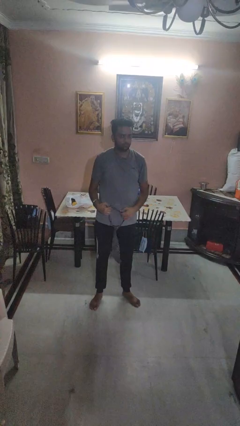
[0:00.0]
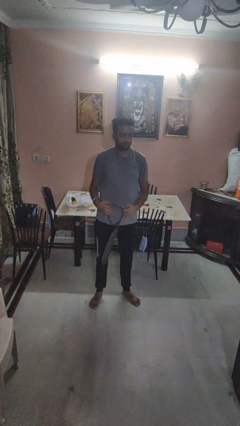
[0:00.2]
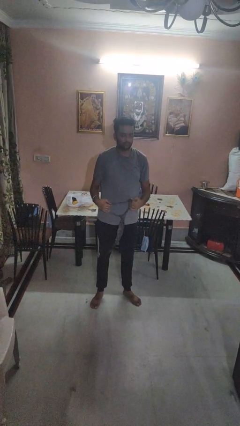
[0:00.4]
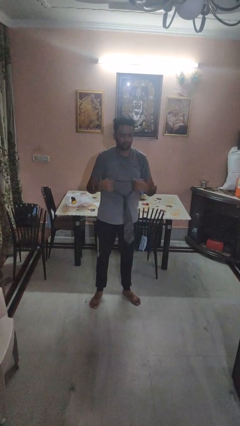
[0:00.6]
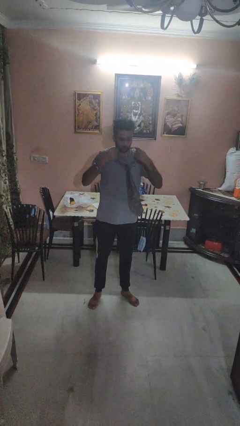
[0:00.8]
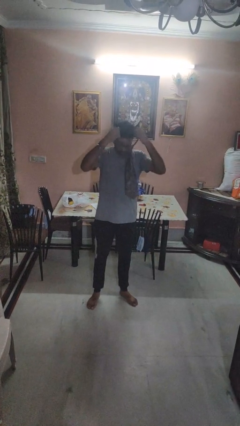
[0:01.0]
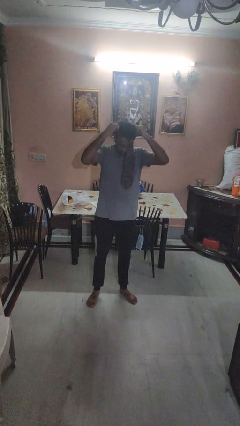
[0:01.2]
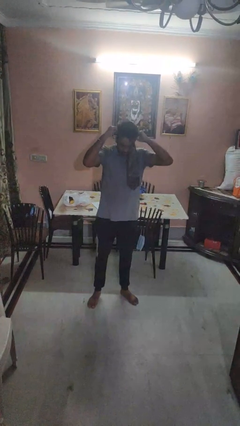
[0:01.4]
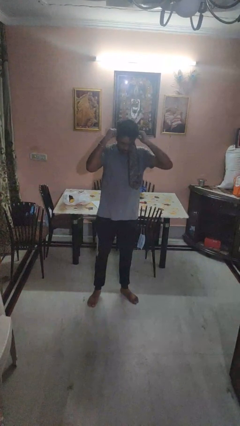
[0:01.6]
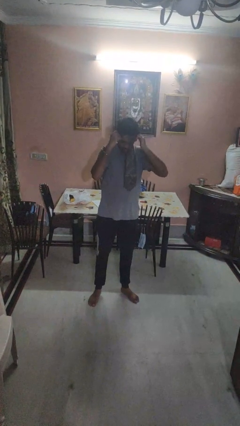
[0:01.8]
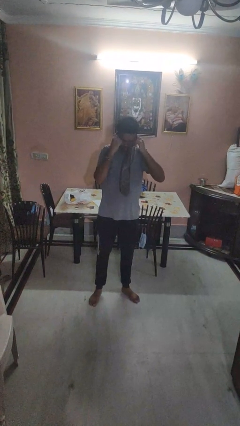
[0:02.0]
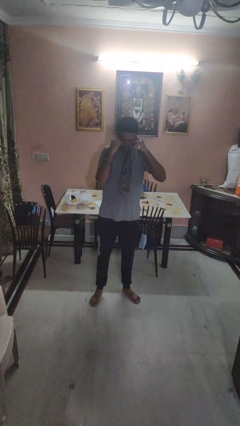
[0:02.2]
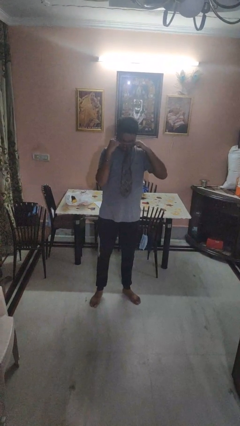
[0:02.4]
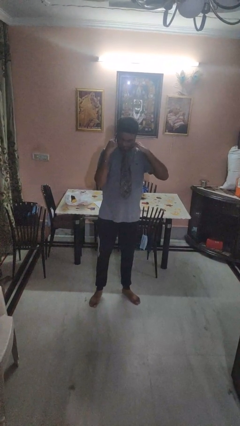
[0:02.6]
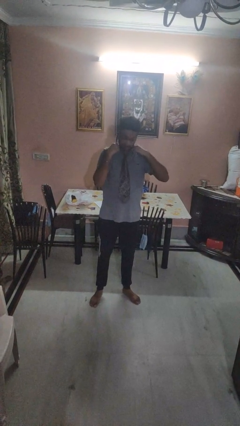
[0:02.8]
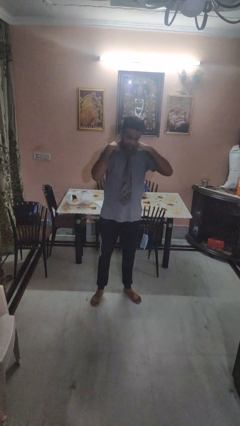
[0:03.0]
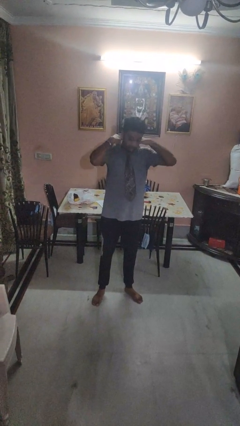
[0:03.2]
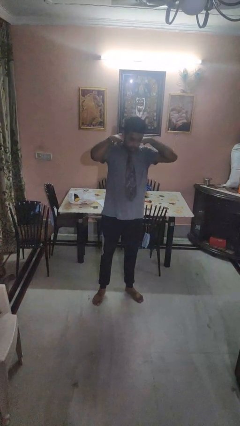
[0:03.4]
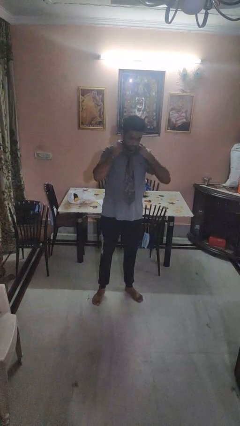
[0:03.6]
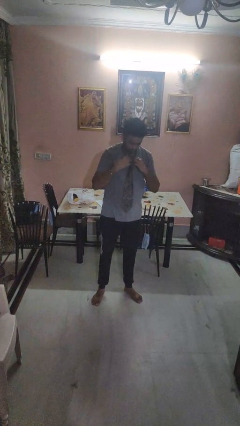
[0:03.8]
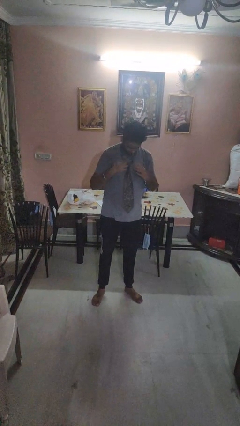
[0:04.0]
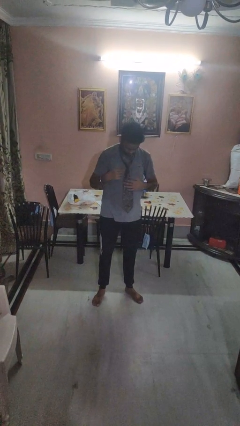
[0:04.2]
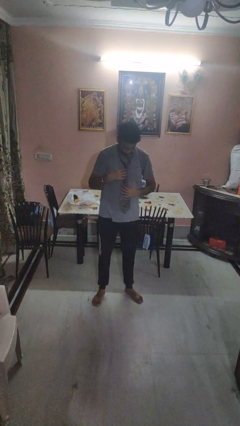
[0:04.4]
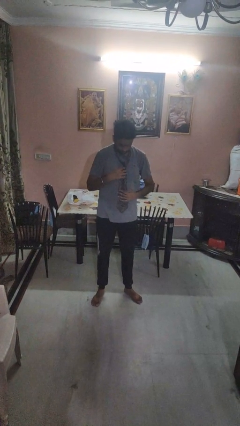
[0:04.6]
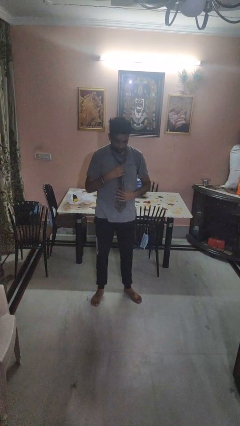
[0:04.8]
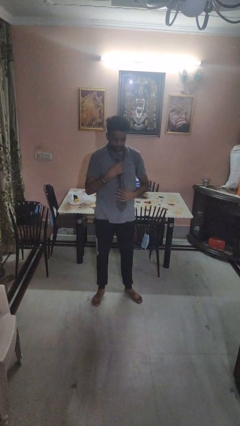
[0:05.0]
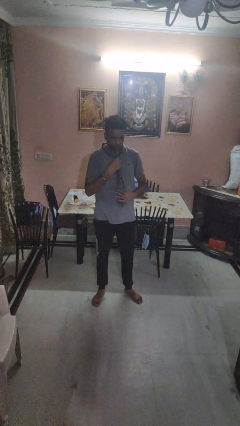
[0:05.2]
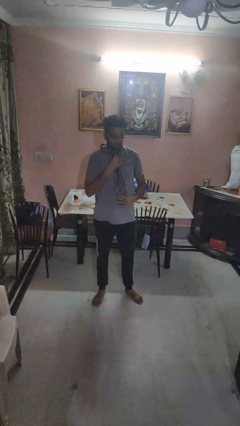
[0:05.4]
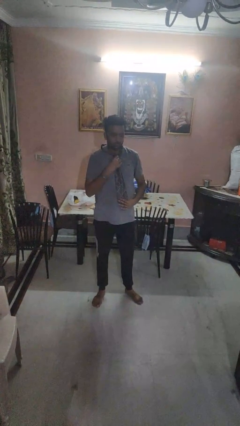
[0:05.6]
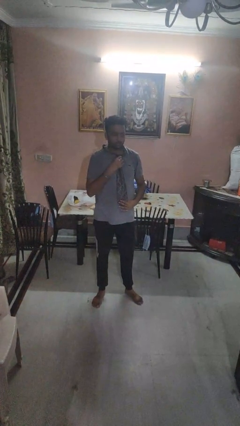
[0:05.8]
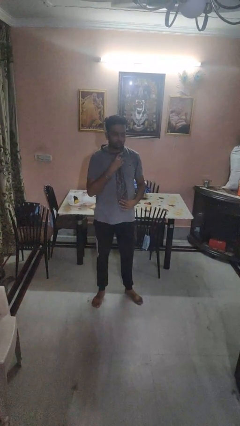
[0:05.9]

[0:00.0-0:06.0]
person puts on necktie

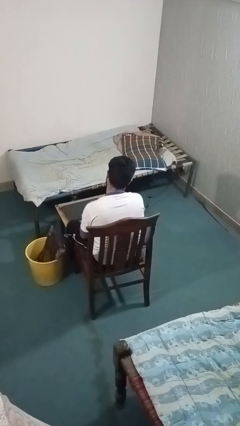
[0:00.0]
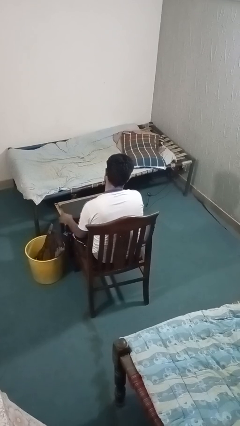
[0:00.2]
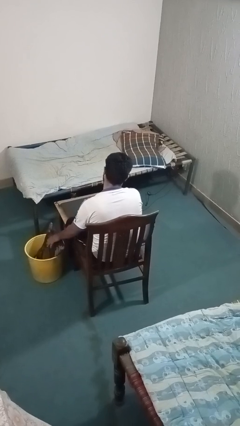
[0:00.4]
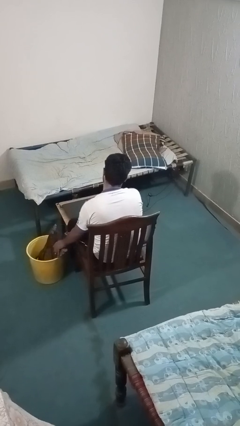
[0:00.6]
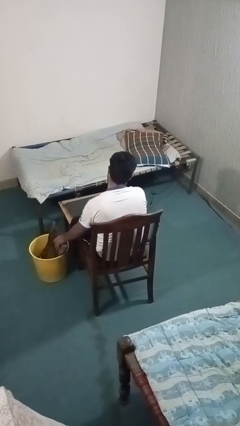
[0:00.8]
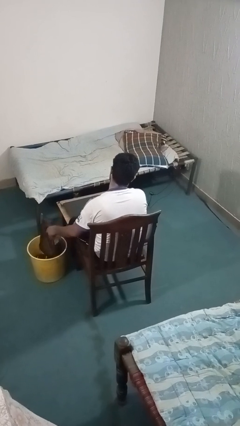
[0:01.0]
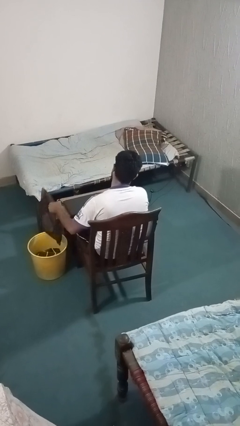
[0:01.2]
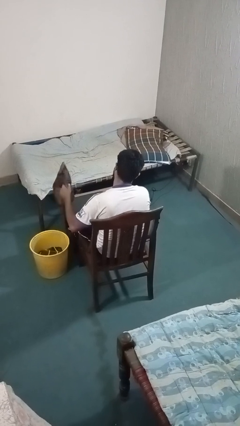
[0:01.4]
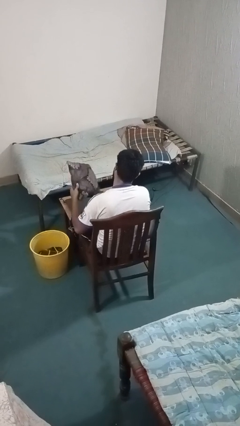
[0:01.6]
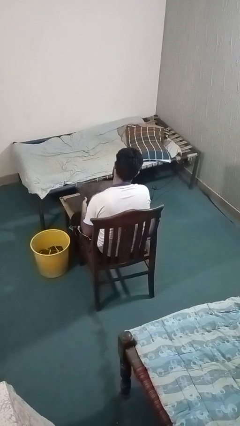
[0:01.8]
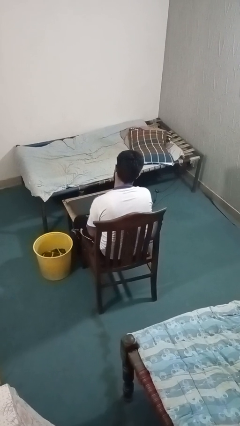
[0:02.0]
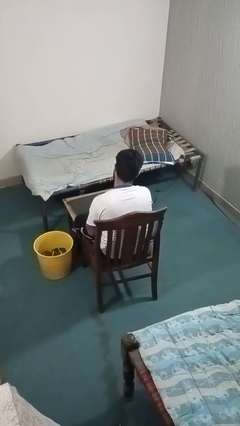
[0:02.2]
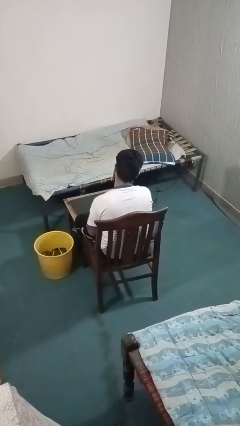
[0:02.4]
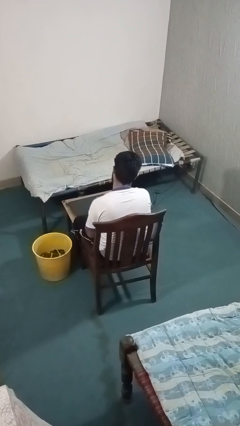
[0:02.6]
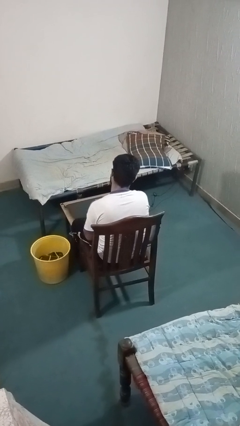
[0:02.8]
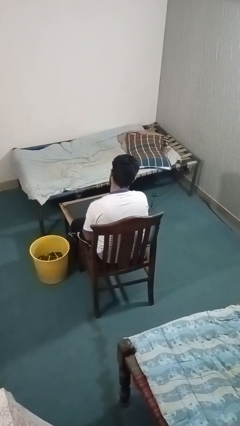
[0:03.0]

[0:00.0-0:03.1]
person takes object from basket

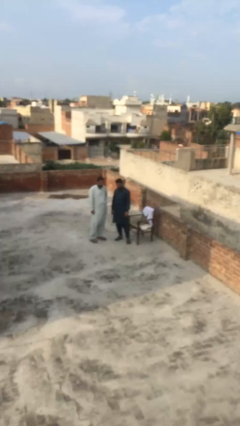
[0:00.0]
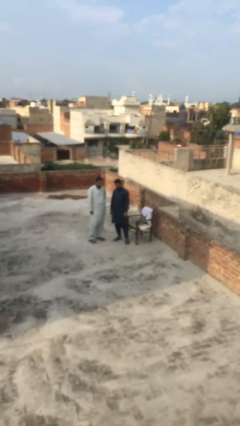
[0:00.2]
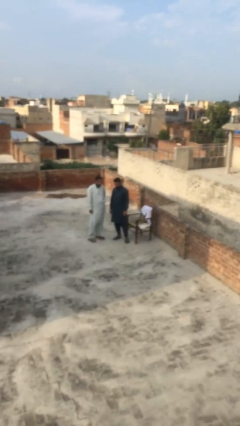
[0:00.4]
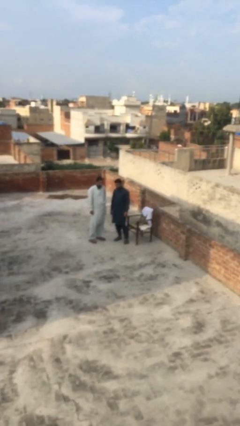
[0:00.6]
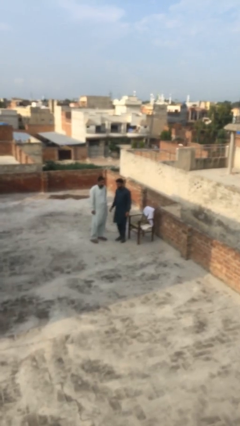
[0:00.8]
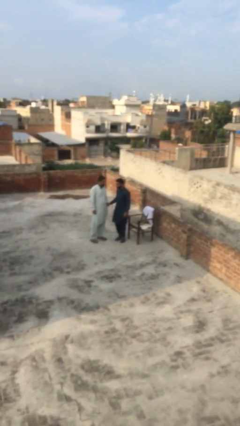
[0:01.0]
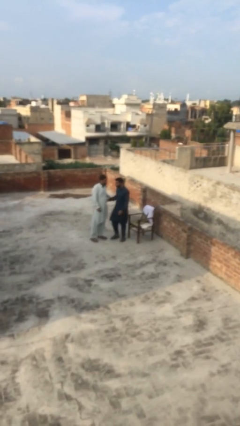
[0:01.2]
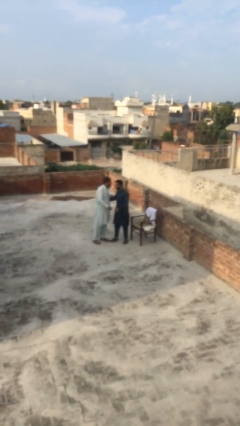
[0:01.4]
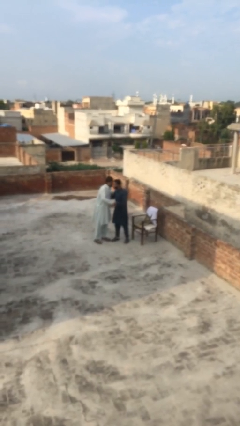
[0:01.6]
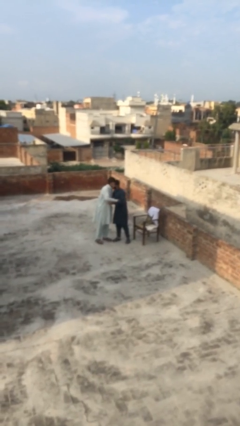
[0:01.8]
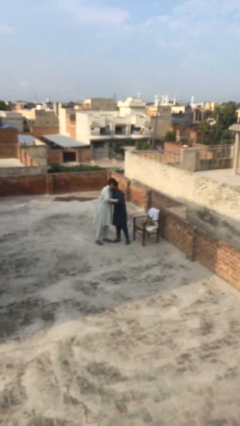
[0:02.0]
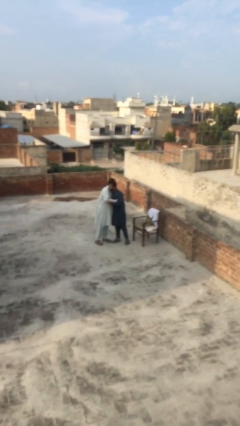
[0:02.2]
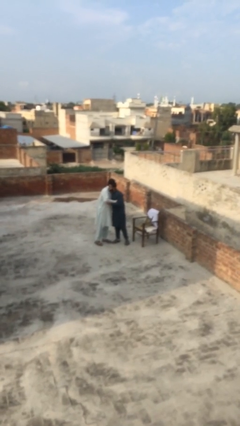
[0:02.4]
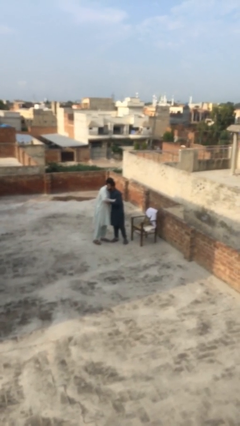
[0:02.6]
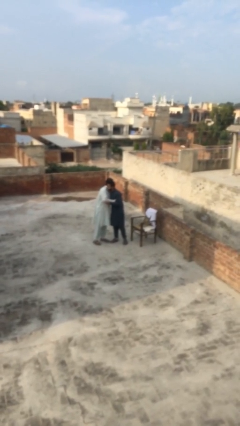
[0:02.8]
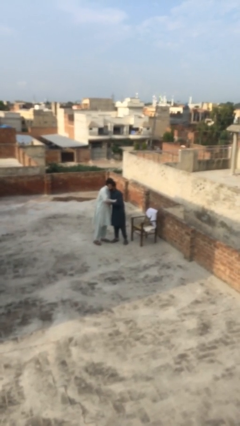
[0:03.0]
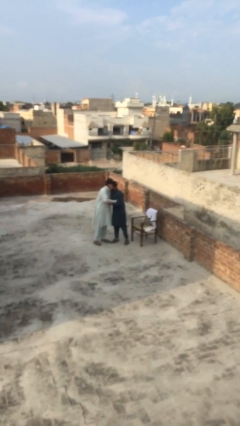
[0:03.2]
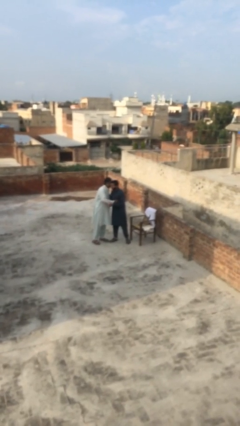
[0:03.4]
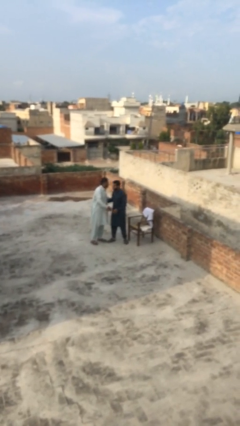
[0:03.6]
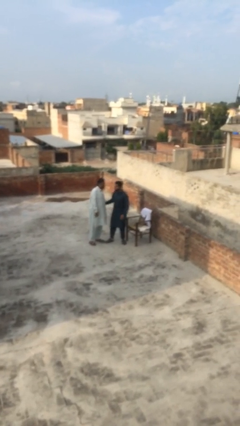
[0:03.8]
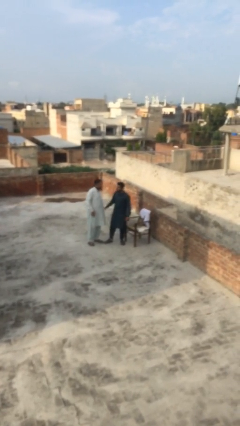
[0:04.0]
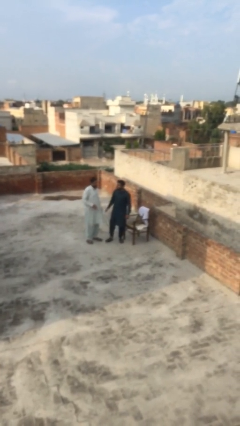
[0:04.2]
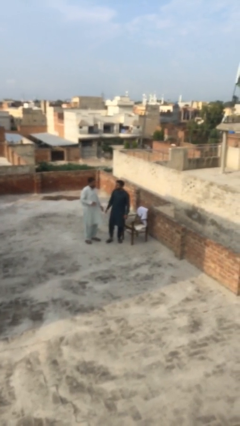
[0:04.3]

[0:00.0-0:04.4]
person embraces person

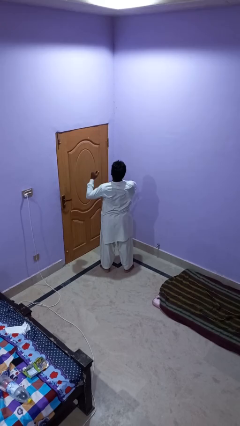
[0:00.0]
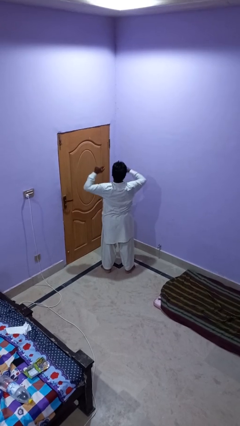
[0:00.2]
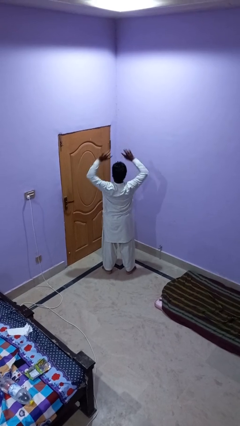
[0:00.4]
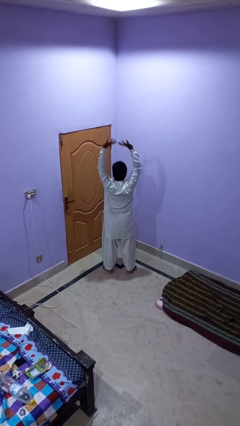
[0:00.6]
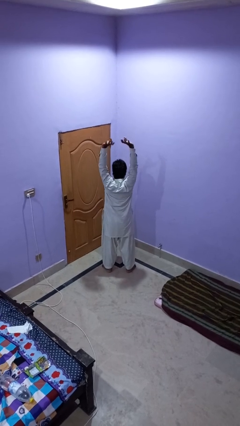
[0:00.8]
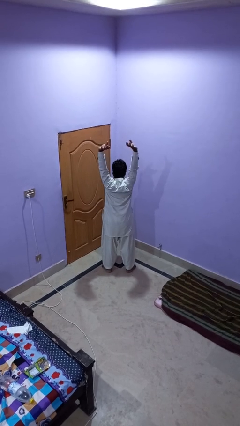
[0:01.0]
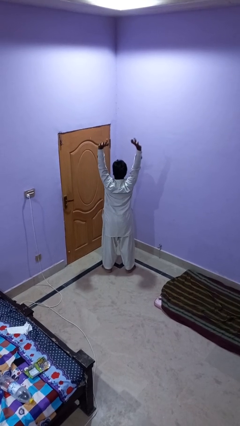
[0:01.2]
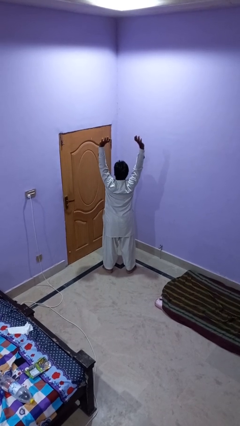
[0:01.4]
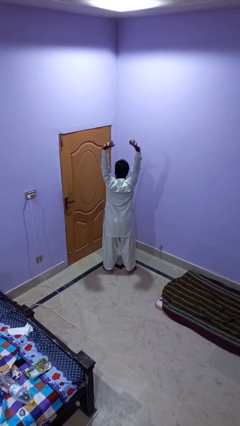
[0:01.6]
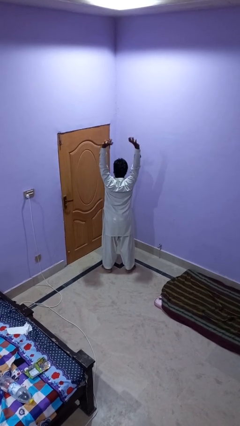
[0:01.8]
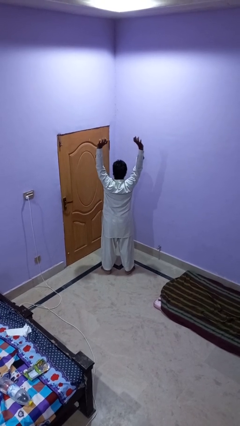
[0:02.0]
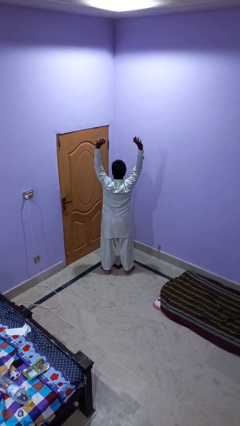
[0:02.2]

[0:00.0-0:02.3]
person stretches arms over head

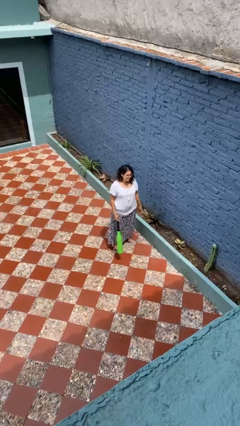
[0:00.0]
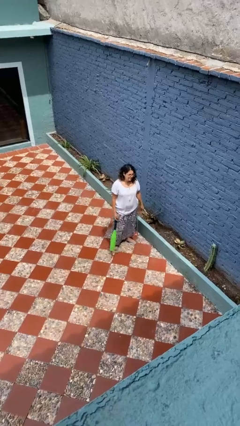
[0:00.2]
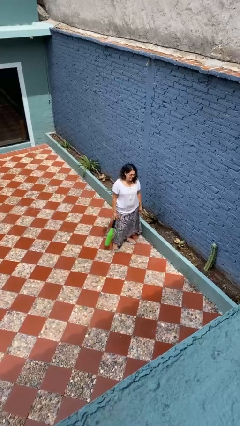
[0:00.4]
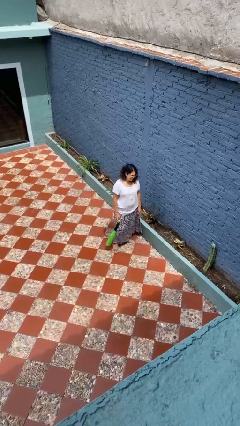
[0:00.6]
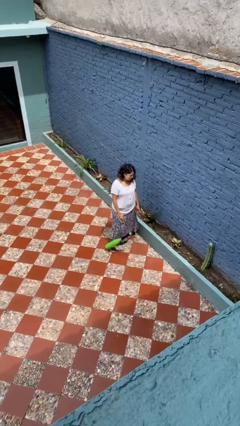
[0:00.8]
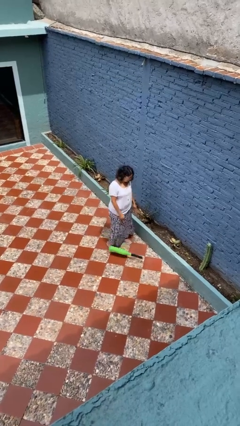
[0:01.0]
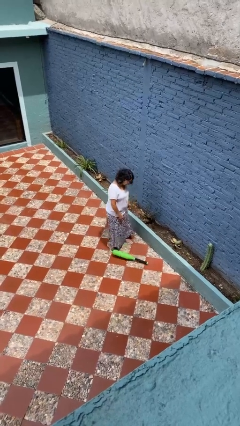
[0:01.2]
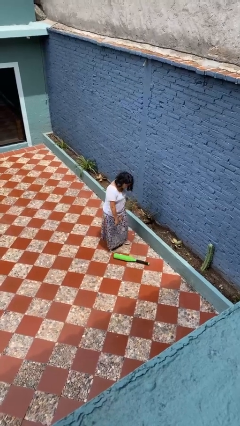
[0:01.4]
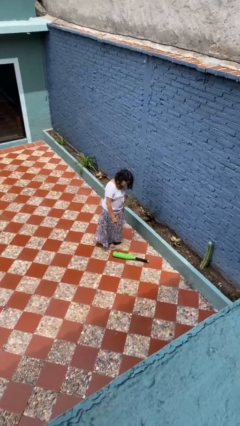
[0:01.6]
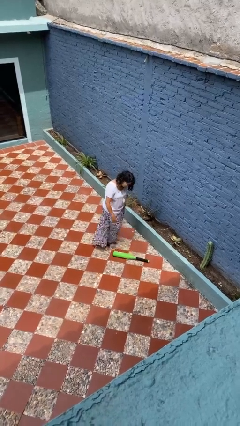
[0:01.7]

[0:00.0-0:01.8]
person drops object
